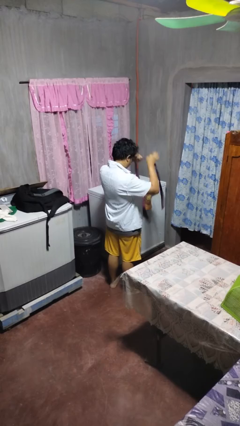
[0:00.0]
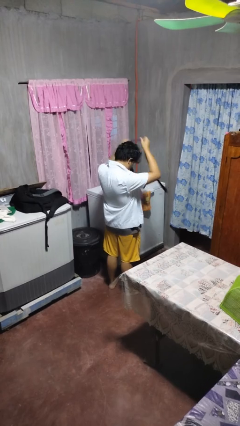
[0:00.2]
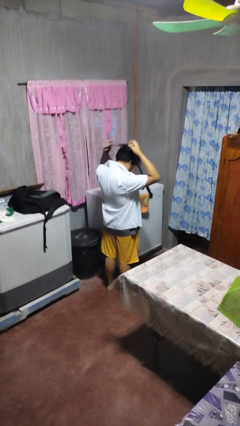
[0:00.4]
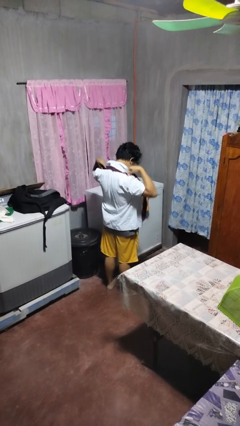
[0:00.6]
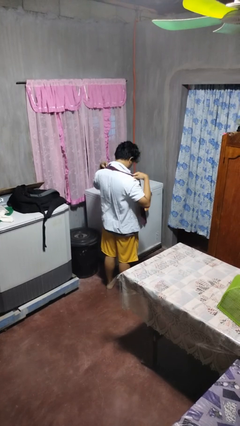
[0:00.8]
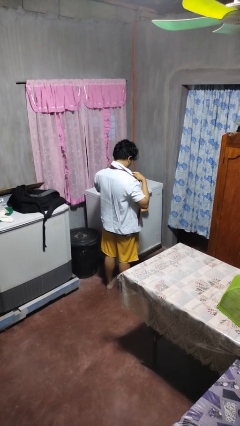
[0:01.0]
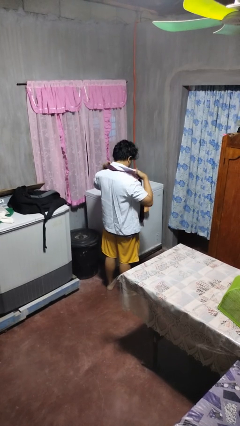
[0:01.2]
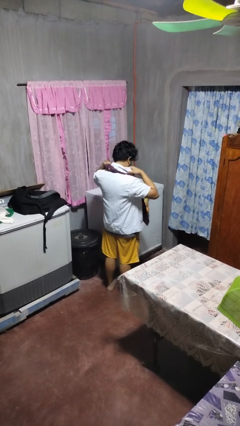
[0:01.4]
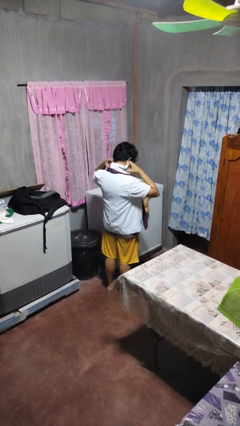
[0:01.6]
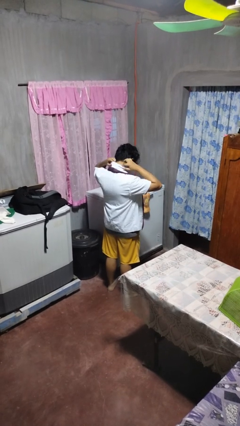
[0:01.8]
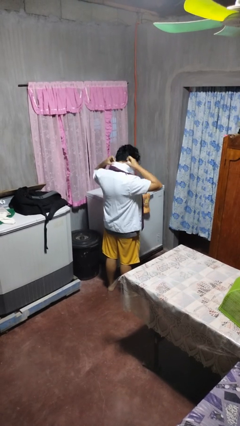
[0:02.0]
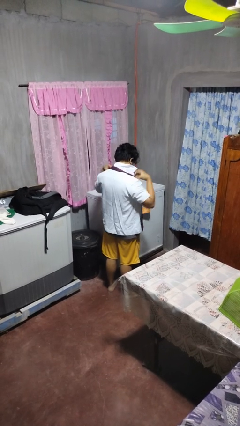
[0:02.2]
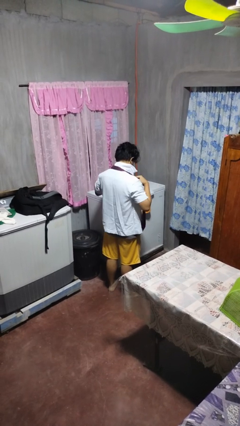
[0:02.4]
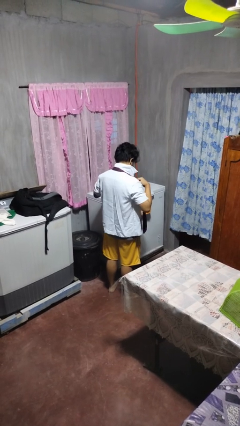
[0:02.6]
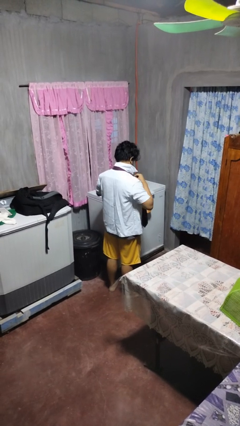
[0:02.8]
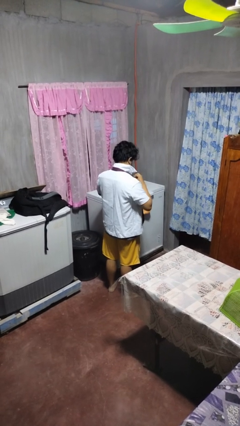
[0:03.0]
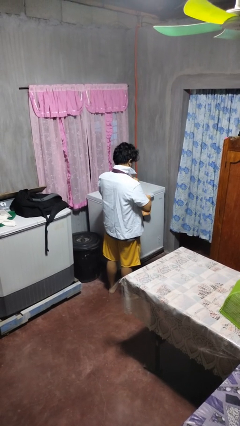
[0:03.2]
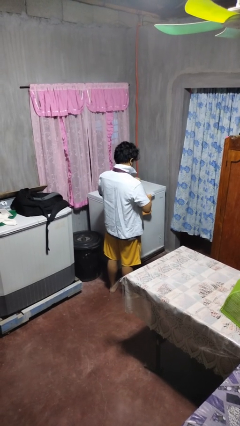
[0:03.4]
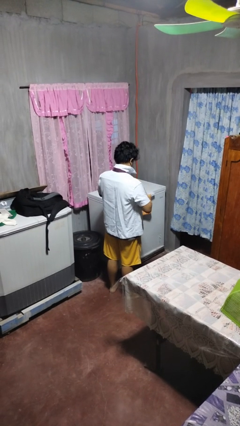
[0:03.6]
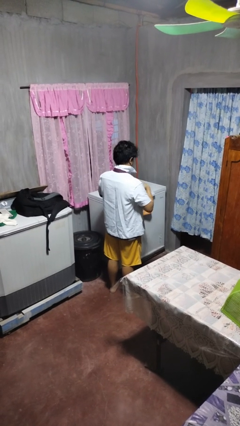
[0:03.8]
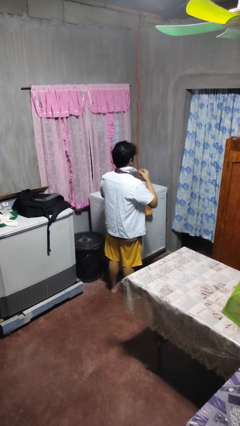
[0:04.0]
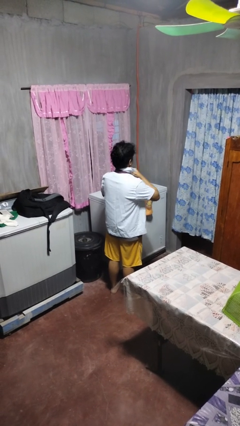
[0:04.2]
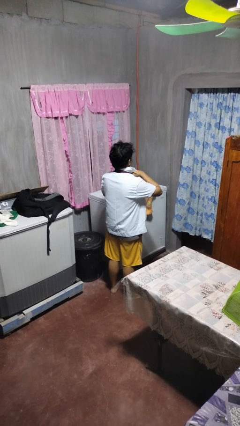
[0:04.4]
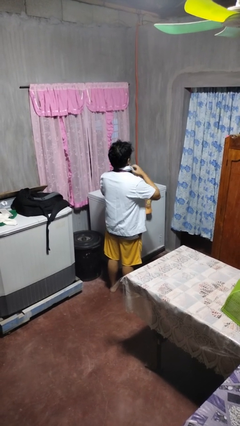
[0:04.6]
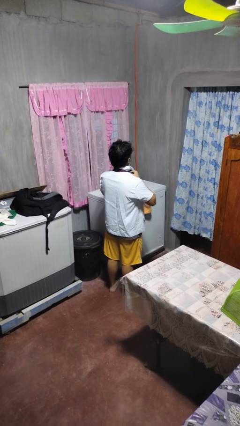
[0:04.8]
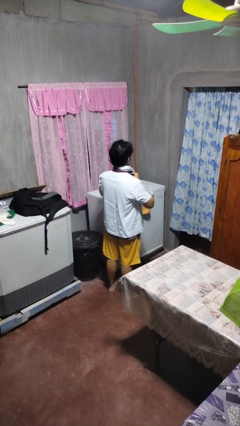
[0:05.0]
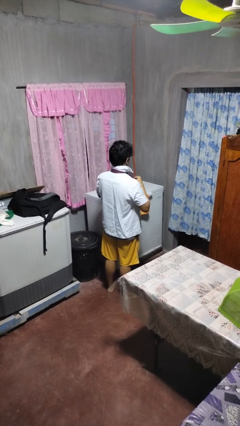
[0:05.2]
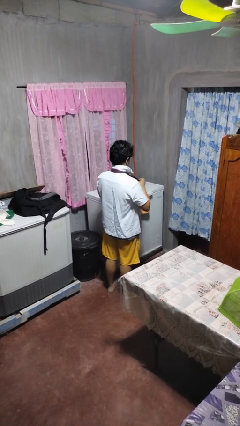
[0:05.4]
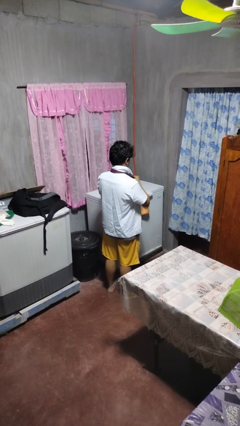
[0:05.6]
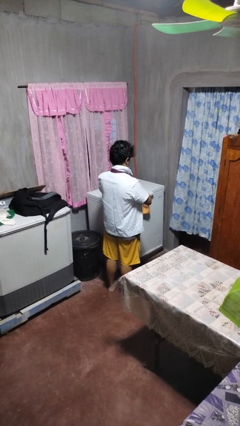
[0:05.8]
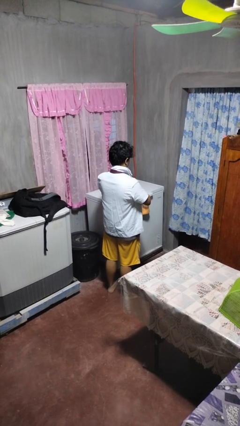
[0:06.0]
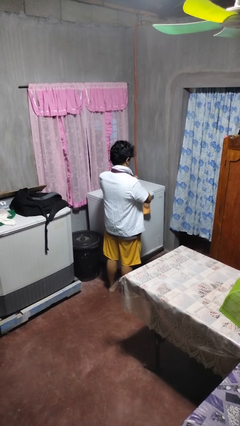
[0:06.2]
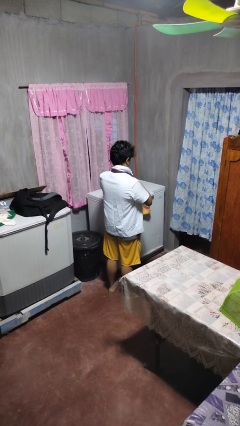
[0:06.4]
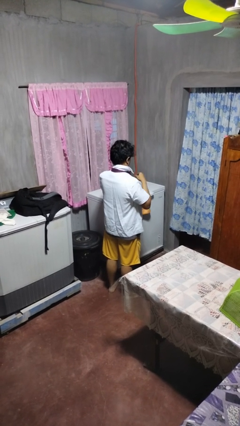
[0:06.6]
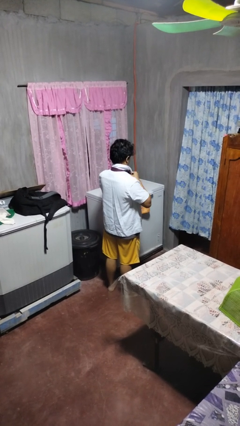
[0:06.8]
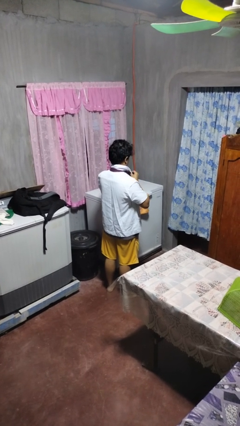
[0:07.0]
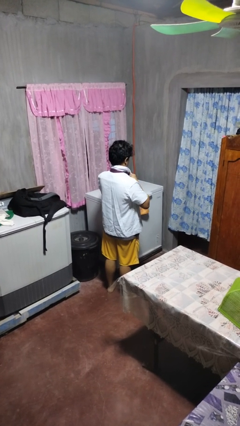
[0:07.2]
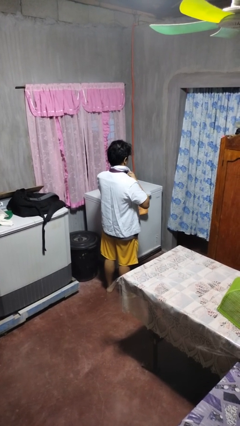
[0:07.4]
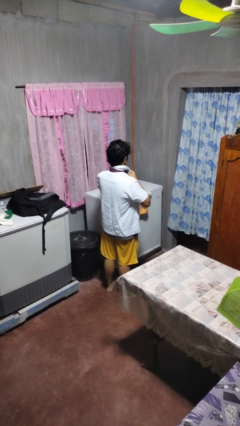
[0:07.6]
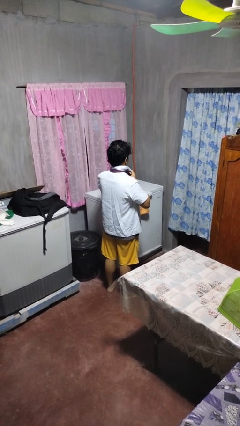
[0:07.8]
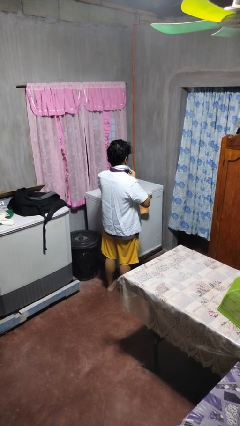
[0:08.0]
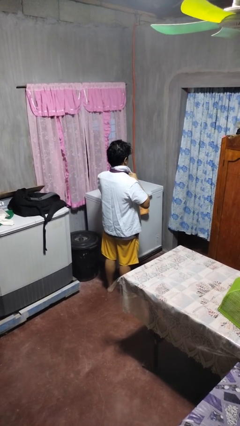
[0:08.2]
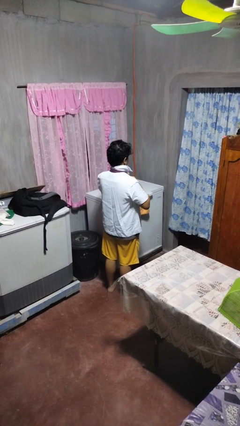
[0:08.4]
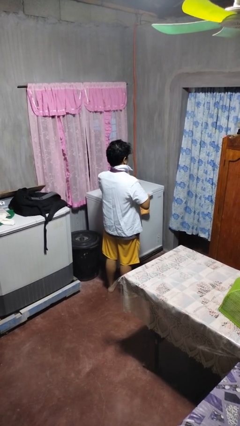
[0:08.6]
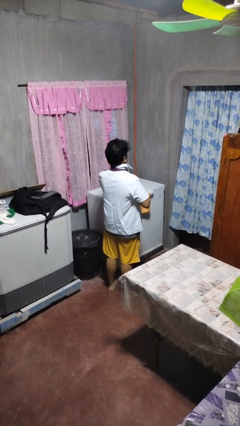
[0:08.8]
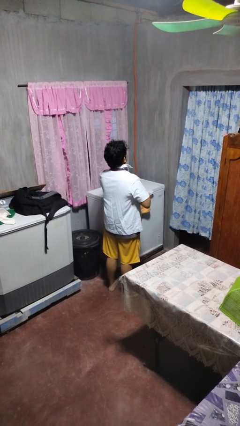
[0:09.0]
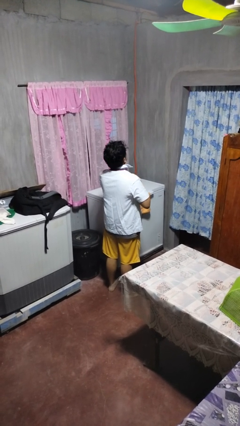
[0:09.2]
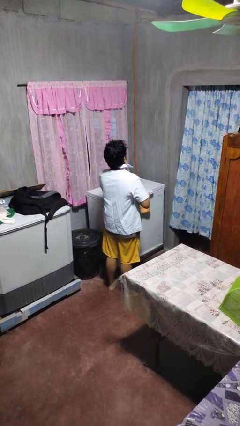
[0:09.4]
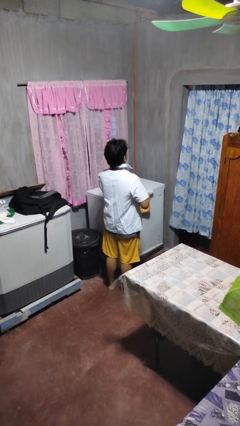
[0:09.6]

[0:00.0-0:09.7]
person puts on necktie

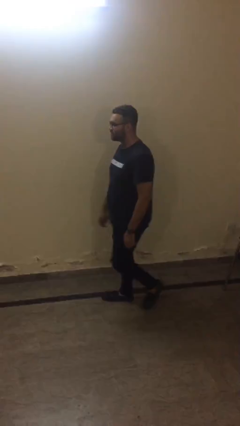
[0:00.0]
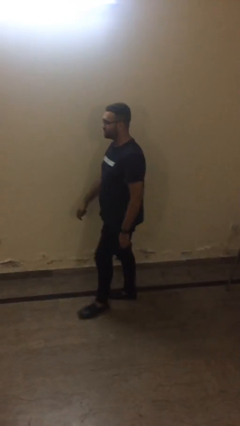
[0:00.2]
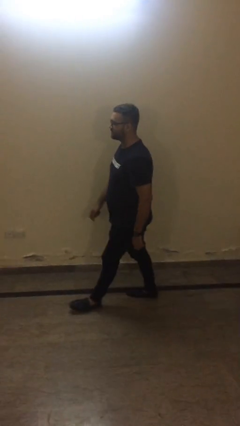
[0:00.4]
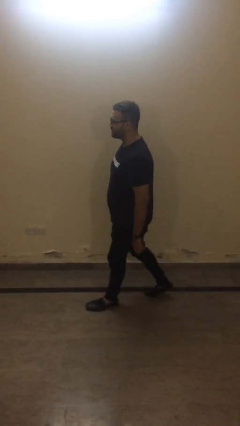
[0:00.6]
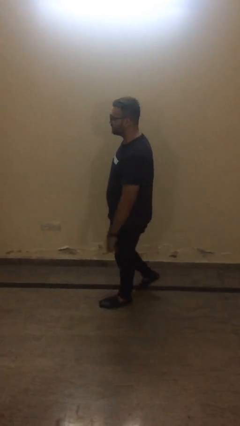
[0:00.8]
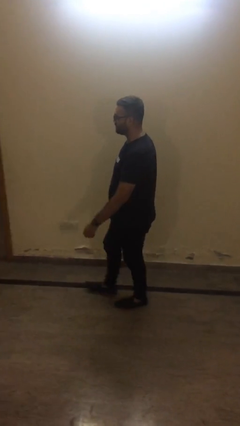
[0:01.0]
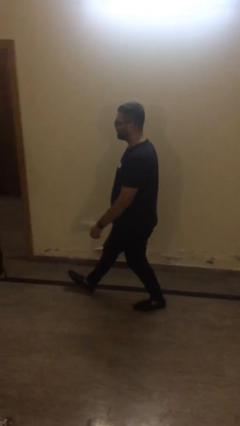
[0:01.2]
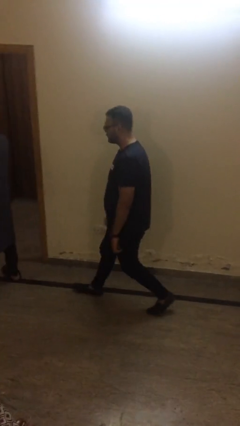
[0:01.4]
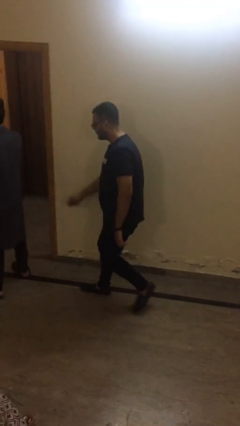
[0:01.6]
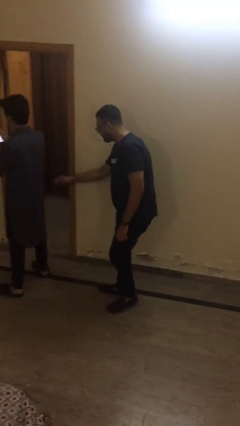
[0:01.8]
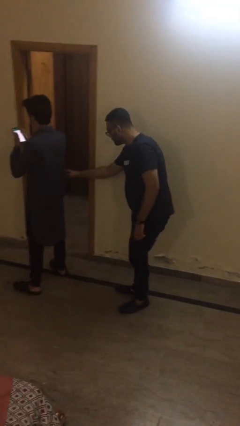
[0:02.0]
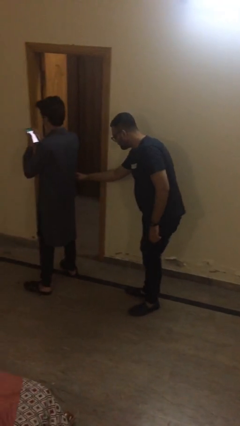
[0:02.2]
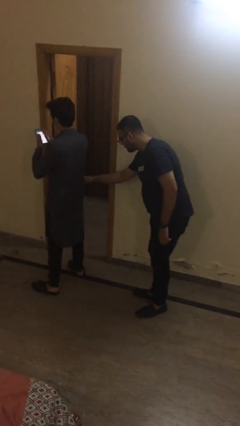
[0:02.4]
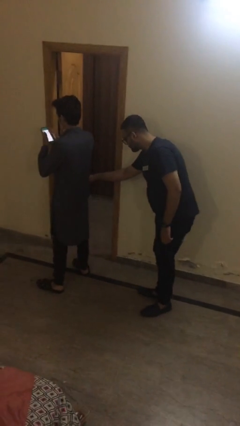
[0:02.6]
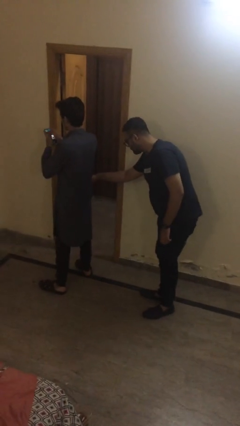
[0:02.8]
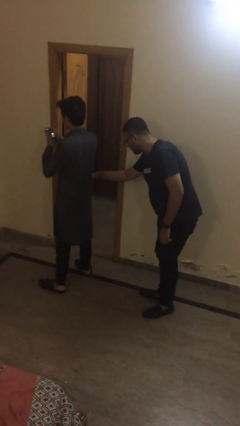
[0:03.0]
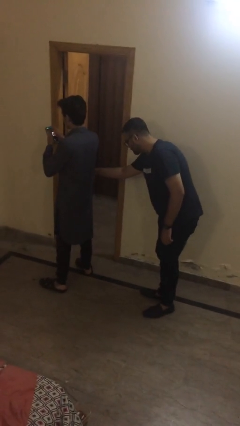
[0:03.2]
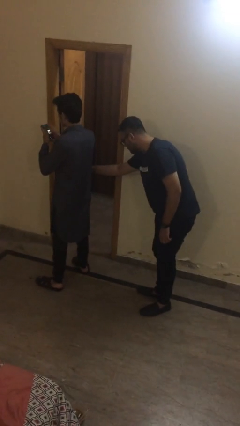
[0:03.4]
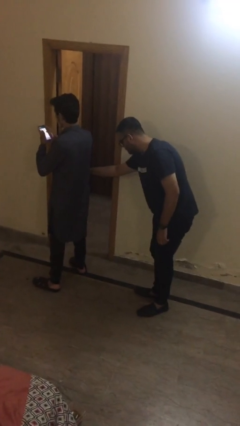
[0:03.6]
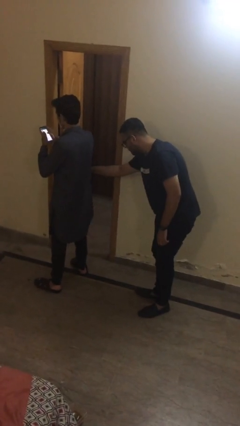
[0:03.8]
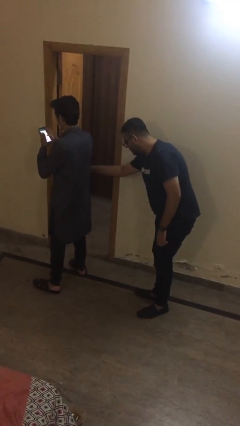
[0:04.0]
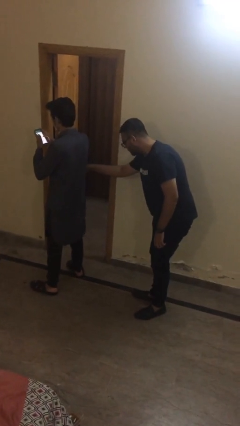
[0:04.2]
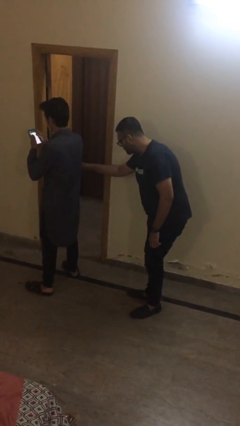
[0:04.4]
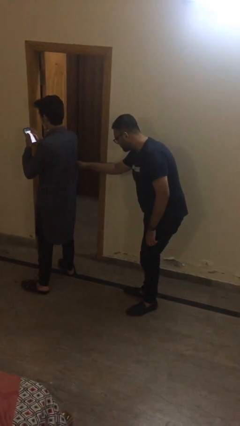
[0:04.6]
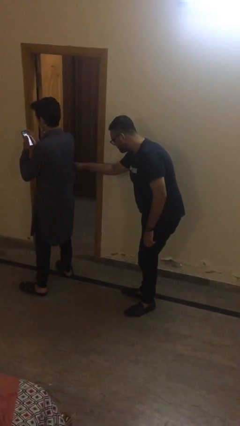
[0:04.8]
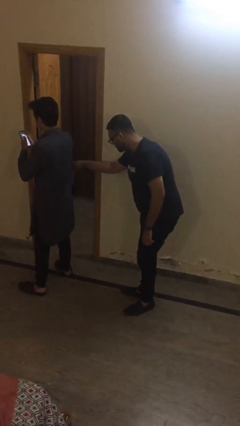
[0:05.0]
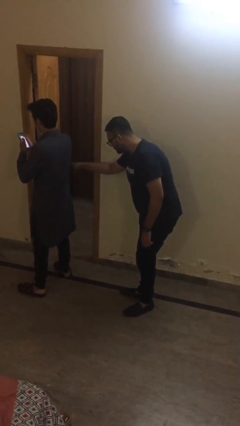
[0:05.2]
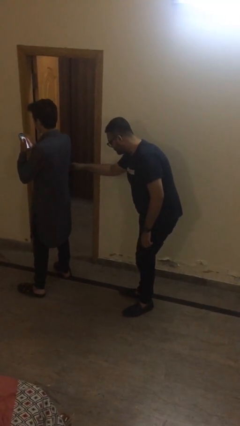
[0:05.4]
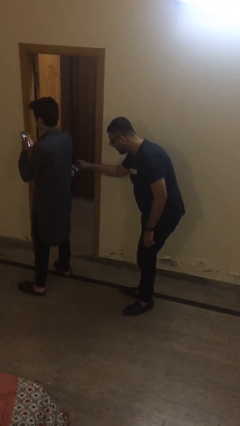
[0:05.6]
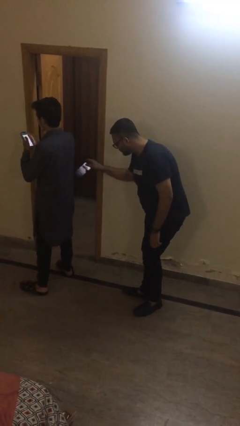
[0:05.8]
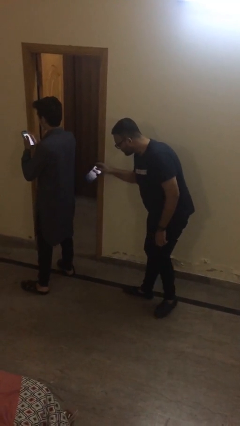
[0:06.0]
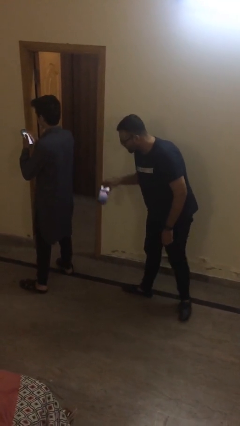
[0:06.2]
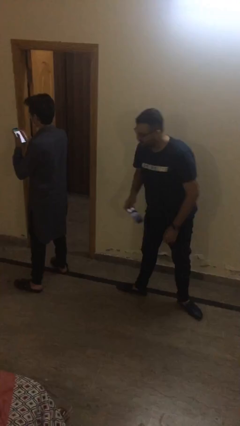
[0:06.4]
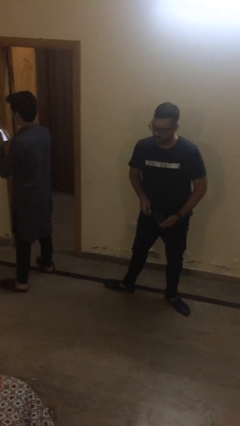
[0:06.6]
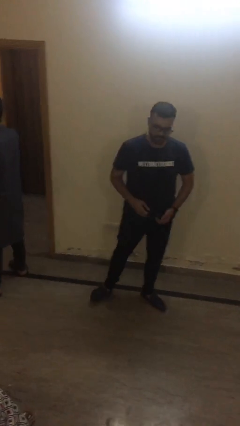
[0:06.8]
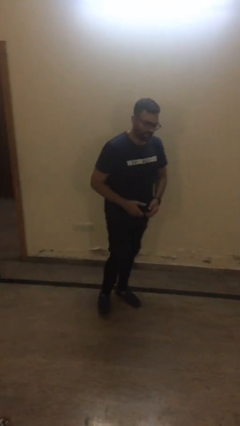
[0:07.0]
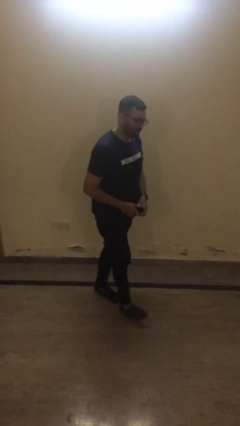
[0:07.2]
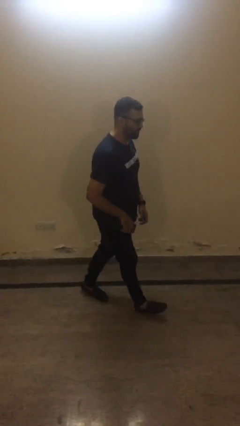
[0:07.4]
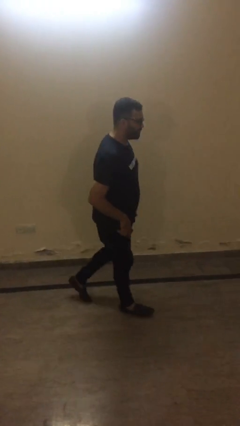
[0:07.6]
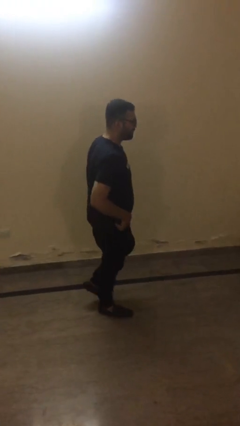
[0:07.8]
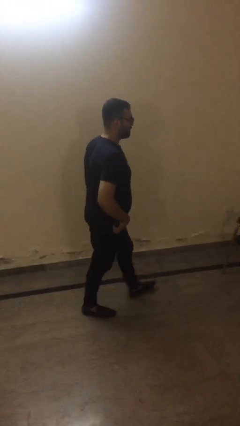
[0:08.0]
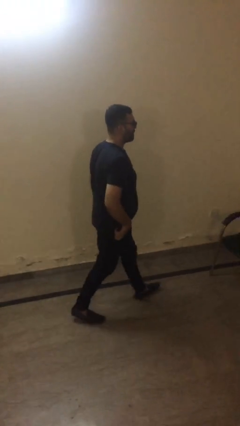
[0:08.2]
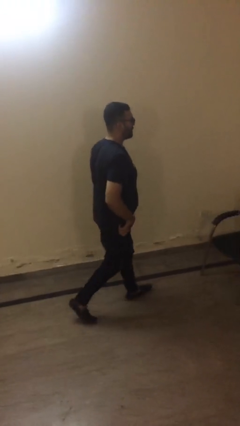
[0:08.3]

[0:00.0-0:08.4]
person steals object from person
